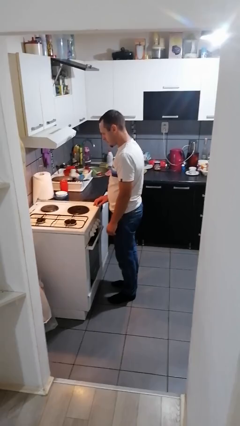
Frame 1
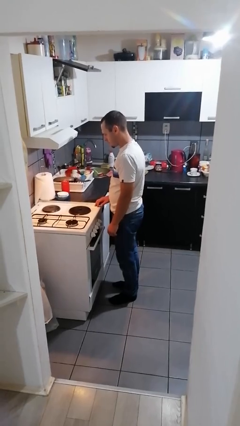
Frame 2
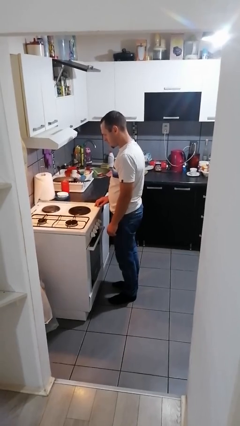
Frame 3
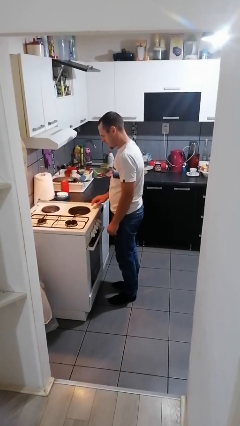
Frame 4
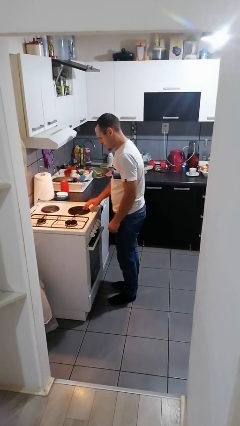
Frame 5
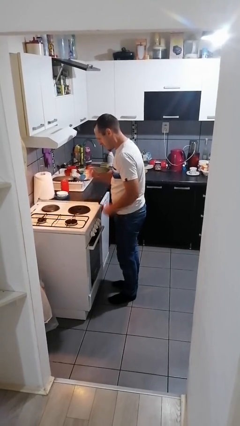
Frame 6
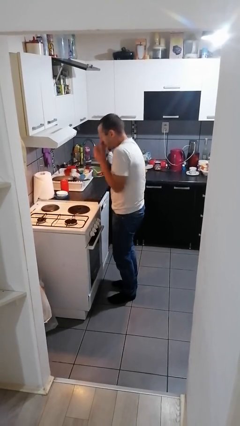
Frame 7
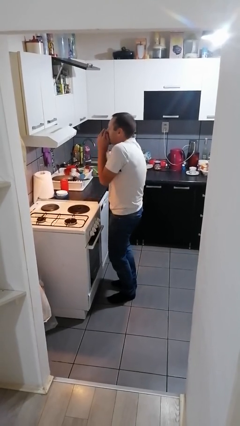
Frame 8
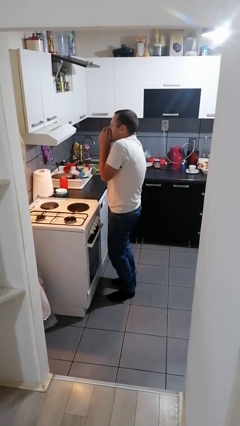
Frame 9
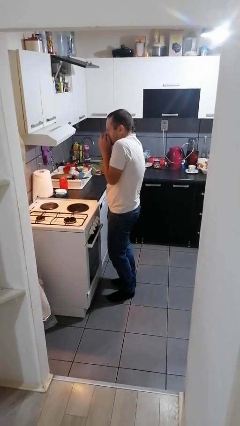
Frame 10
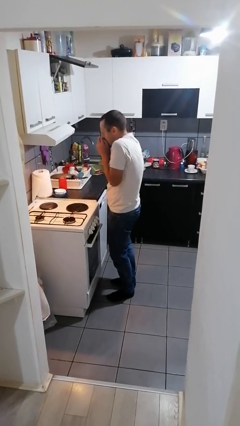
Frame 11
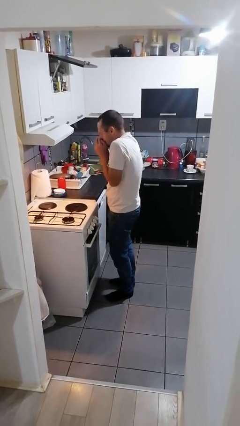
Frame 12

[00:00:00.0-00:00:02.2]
person burns hand

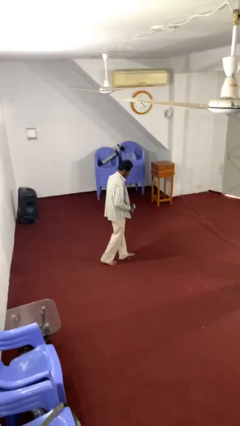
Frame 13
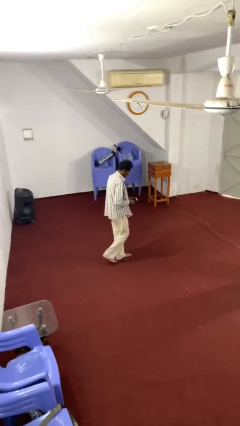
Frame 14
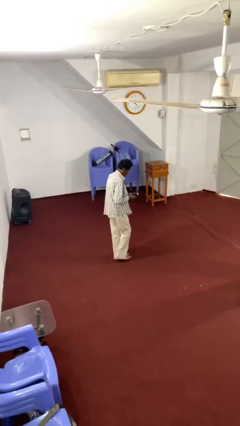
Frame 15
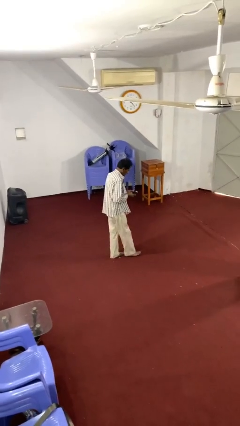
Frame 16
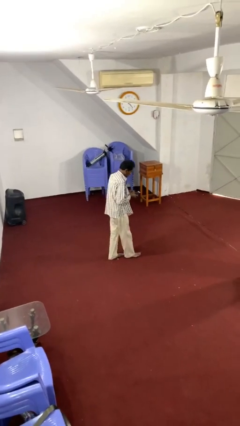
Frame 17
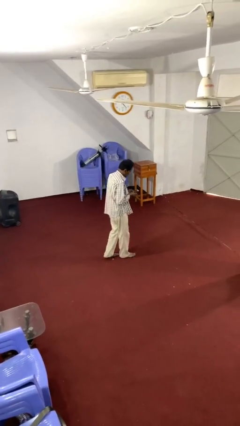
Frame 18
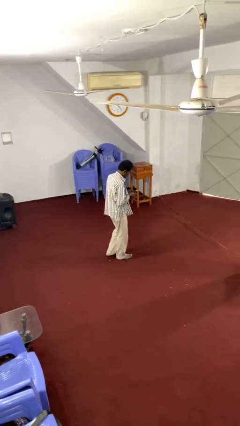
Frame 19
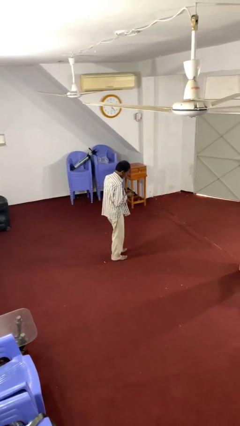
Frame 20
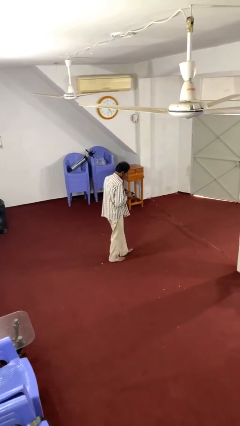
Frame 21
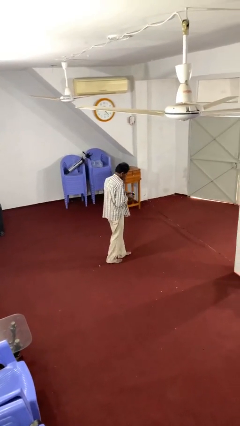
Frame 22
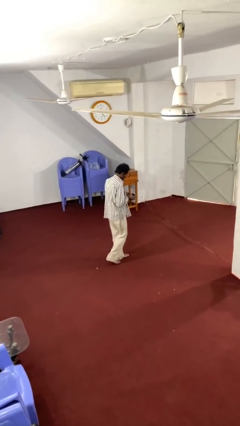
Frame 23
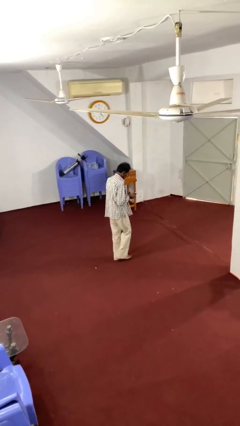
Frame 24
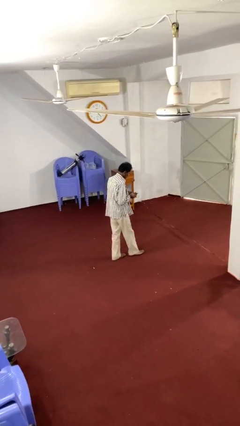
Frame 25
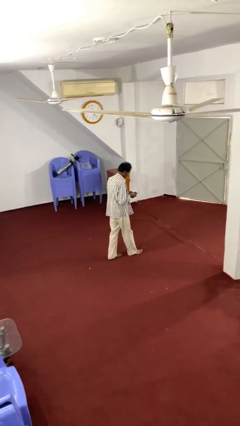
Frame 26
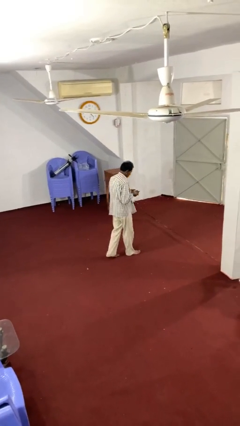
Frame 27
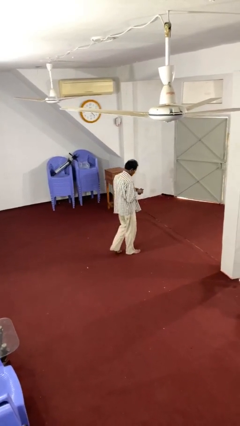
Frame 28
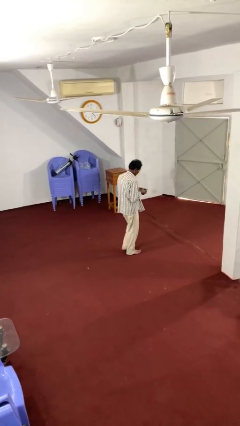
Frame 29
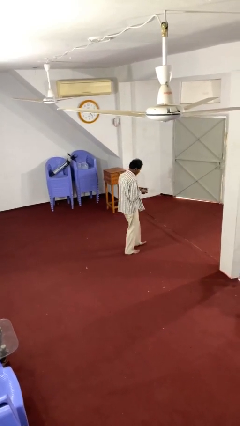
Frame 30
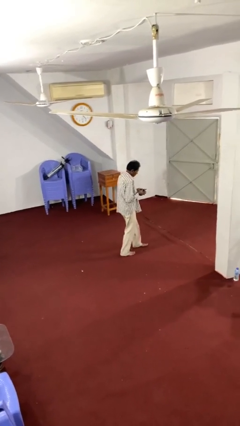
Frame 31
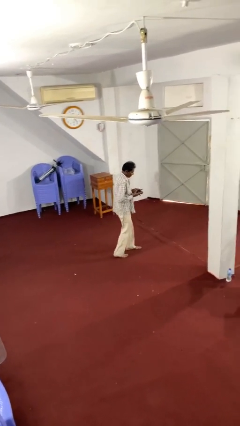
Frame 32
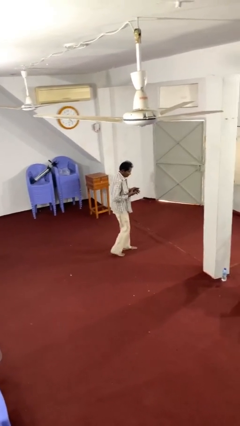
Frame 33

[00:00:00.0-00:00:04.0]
person texts on phone

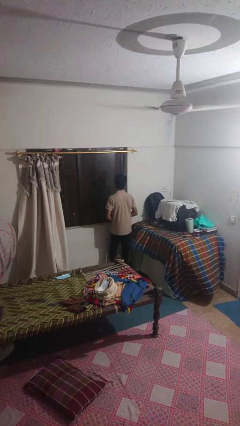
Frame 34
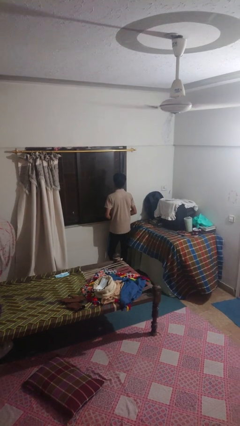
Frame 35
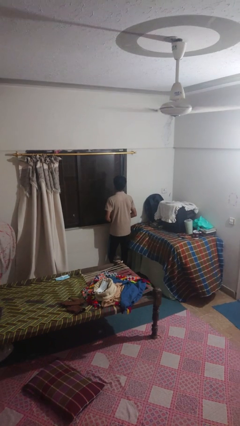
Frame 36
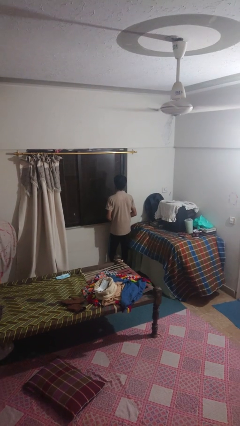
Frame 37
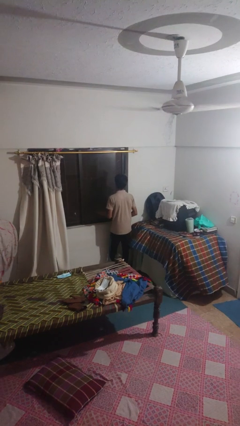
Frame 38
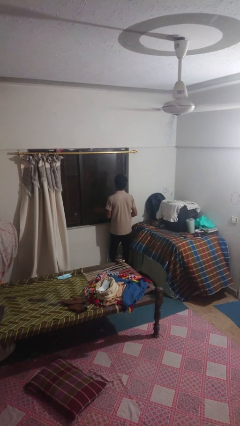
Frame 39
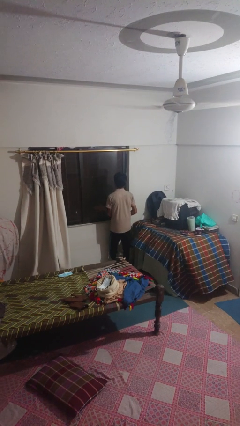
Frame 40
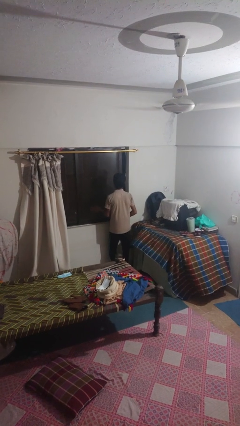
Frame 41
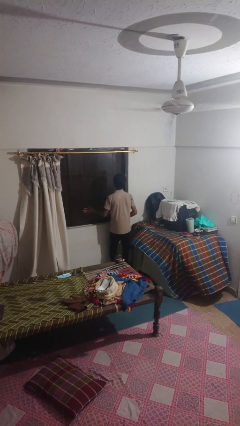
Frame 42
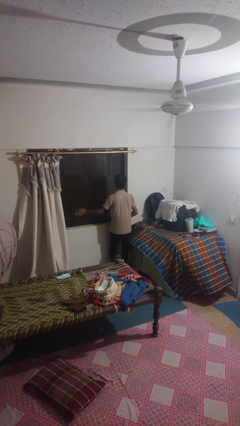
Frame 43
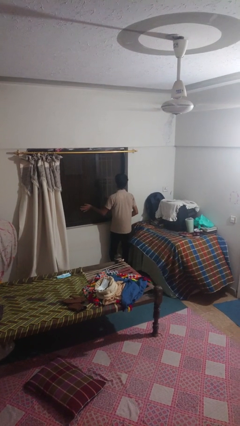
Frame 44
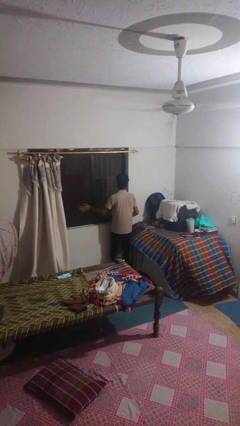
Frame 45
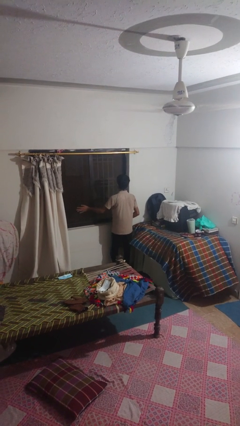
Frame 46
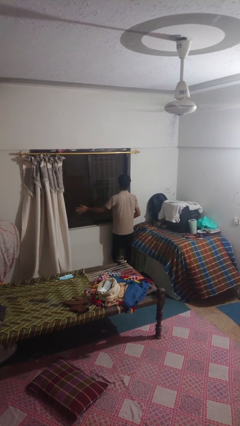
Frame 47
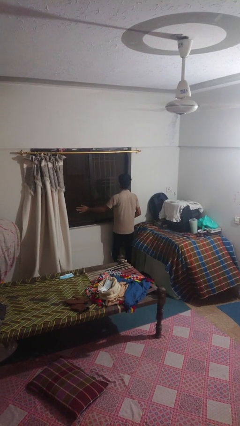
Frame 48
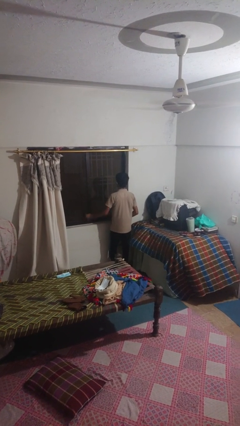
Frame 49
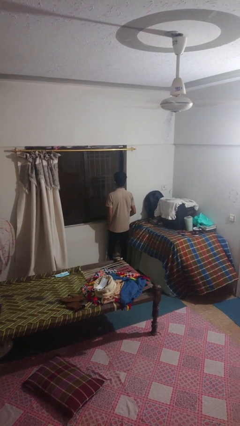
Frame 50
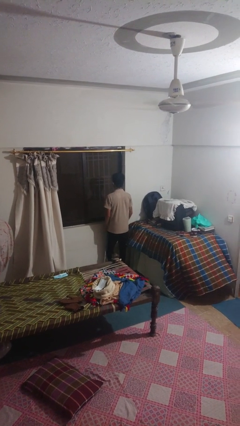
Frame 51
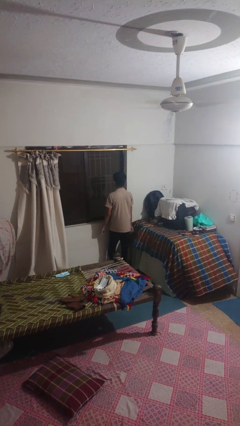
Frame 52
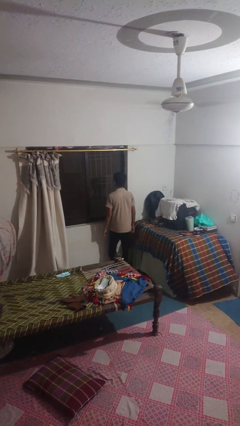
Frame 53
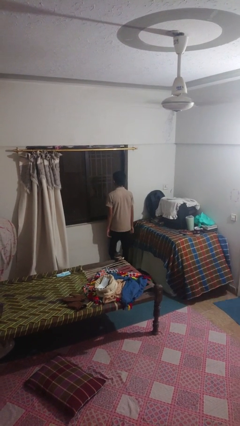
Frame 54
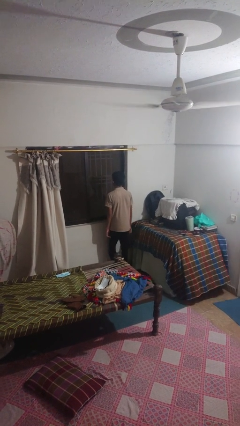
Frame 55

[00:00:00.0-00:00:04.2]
person opens sliding door

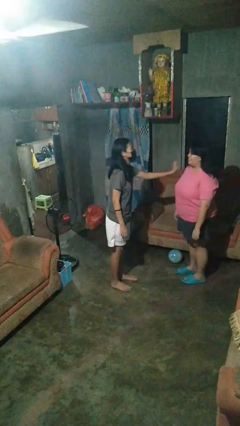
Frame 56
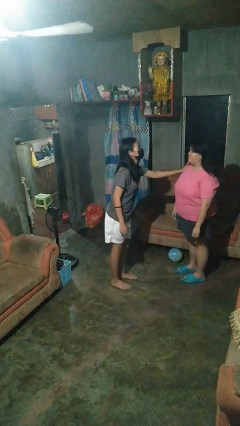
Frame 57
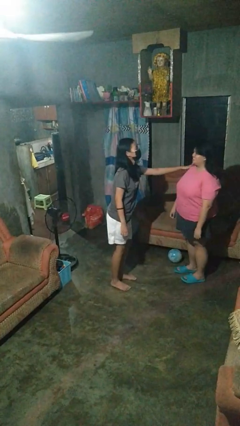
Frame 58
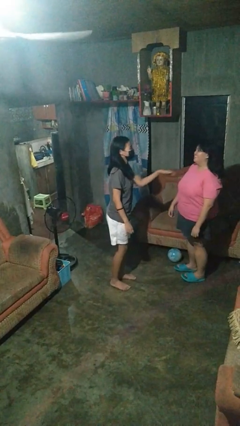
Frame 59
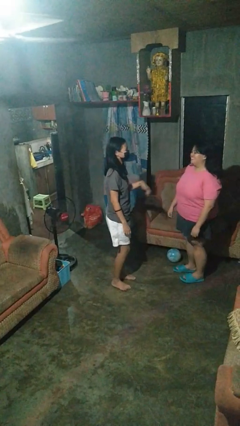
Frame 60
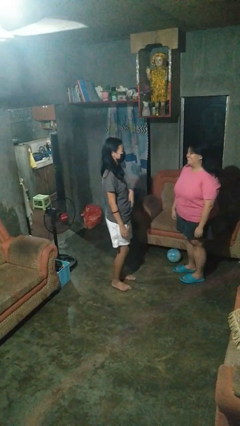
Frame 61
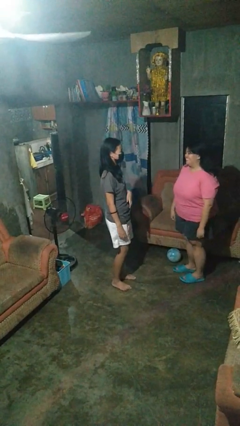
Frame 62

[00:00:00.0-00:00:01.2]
person shoves person

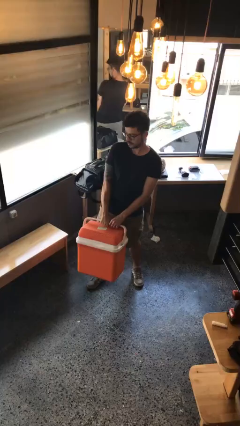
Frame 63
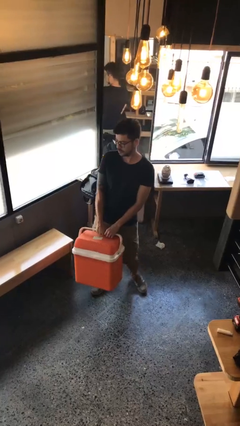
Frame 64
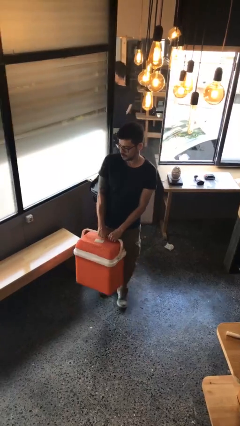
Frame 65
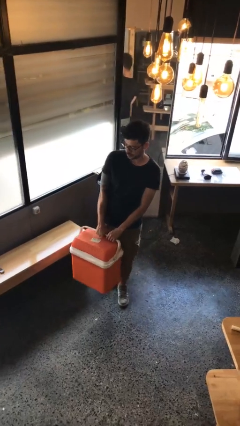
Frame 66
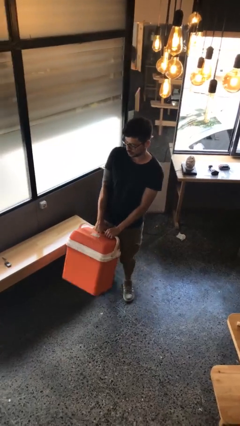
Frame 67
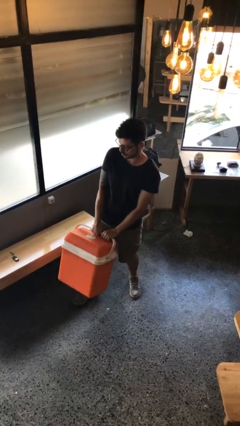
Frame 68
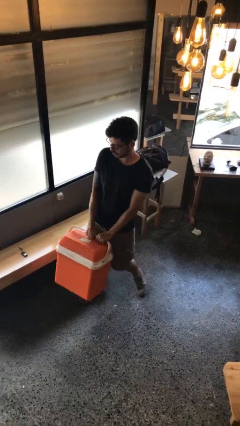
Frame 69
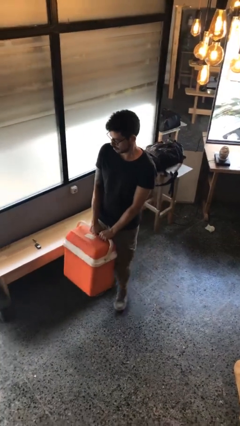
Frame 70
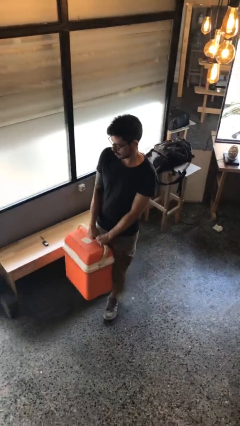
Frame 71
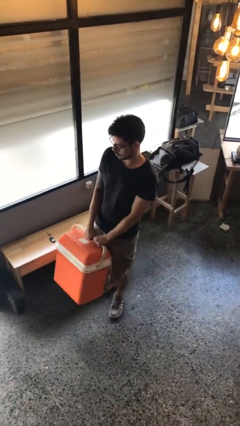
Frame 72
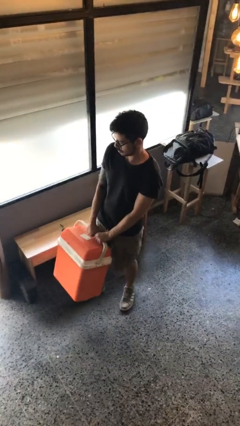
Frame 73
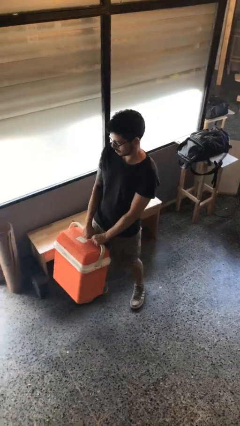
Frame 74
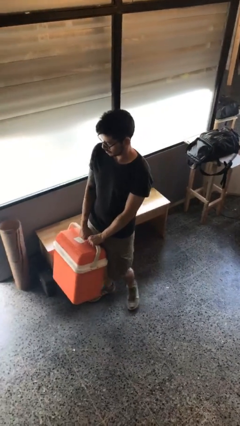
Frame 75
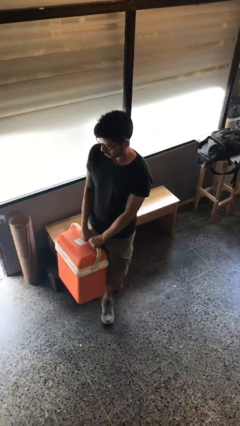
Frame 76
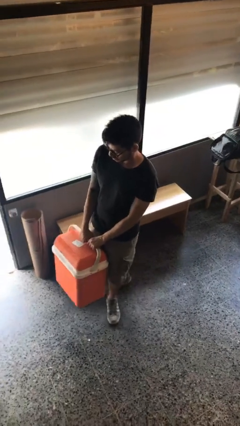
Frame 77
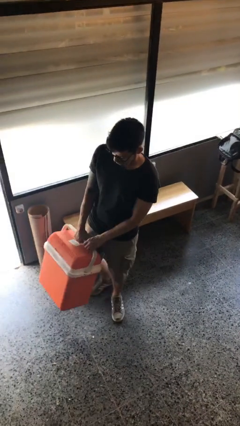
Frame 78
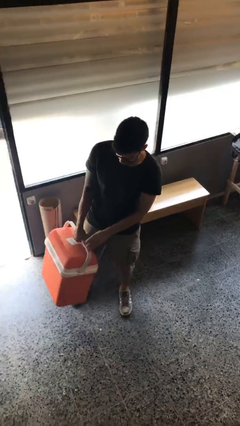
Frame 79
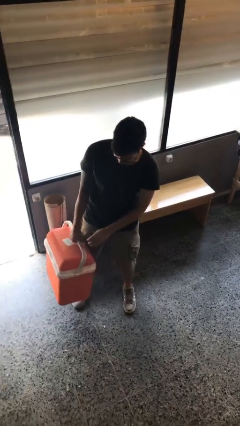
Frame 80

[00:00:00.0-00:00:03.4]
person carries heavy object

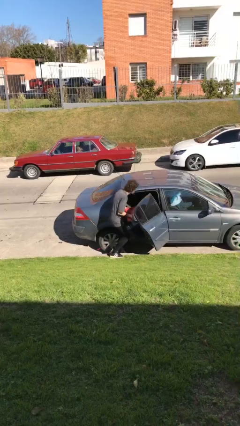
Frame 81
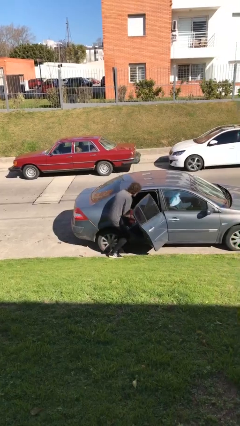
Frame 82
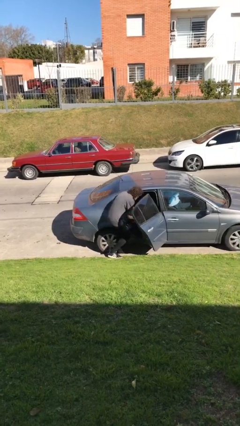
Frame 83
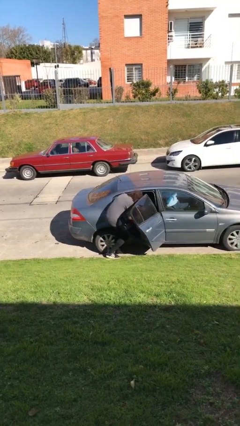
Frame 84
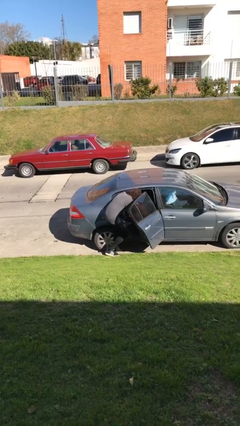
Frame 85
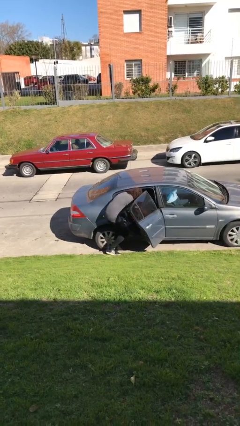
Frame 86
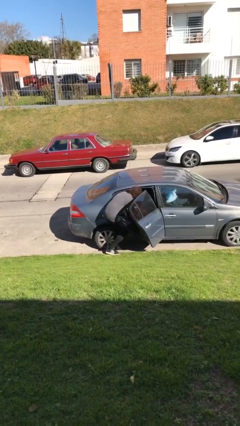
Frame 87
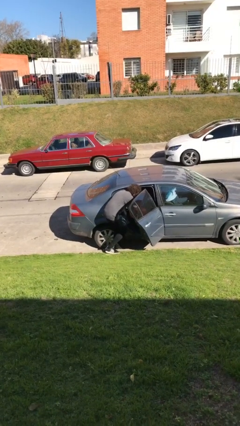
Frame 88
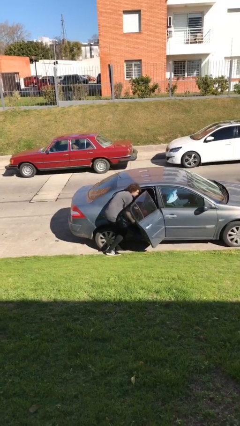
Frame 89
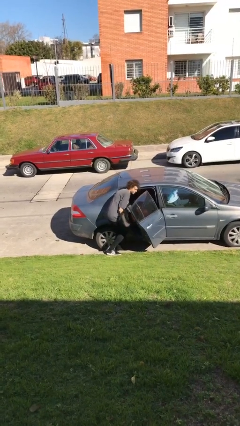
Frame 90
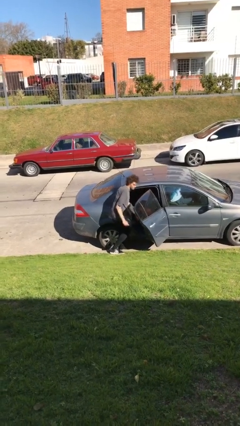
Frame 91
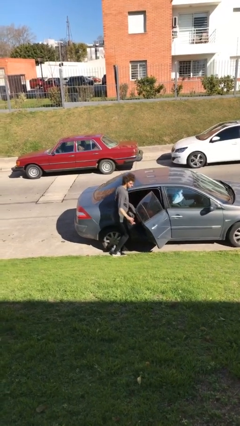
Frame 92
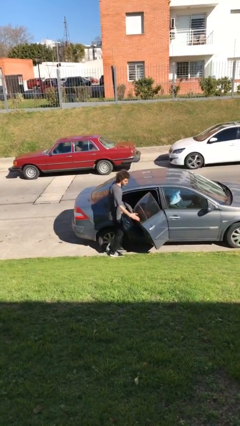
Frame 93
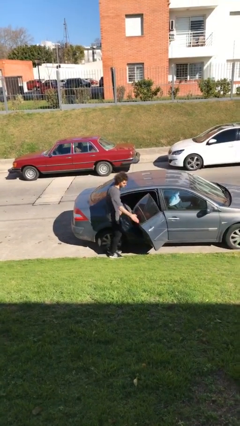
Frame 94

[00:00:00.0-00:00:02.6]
person loads car
